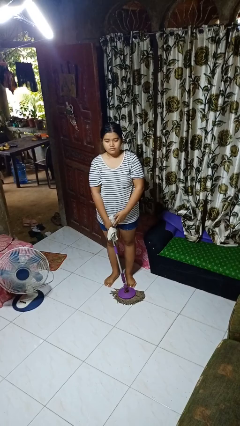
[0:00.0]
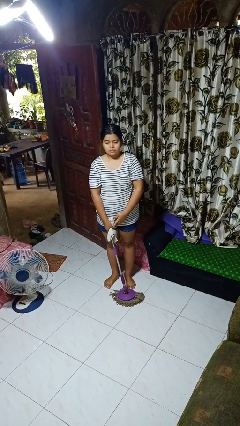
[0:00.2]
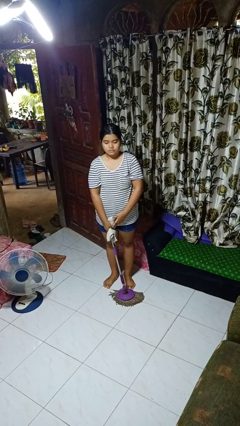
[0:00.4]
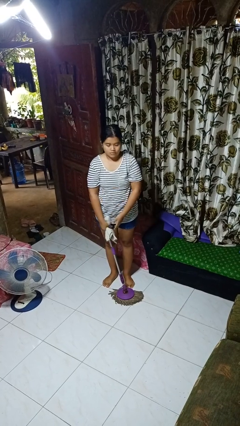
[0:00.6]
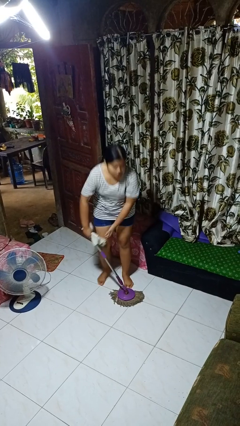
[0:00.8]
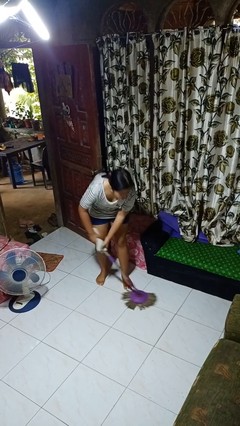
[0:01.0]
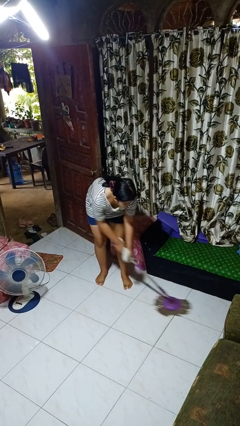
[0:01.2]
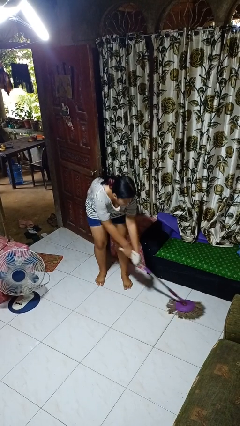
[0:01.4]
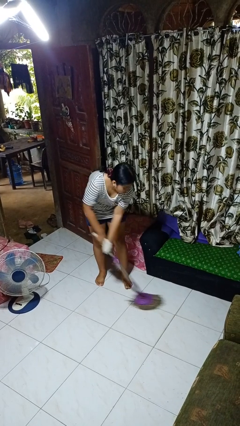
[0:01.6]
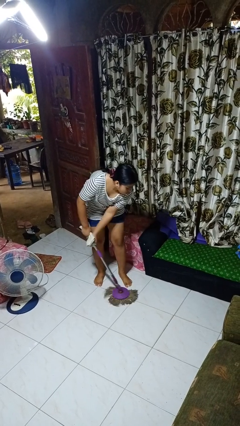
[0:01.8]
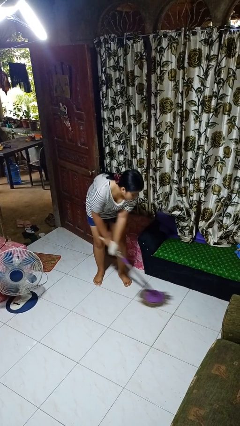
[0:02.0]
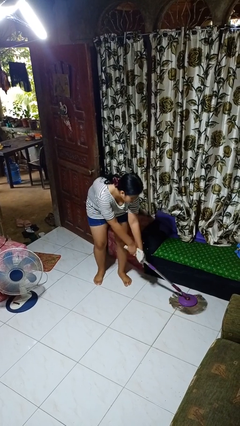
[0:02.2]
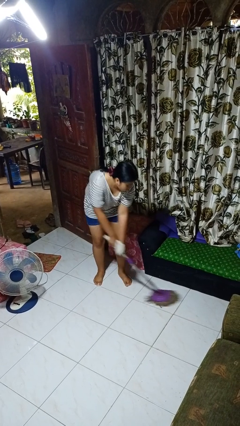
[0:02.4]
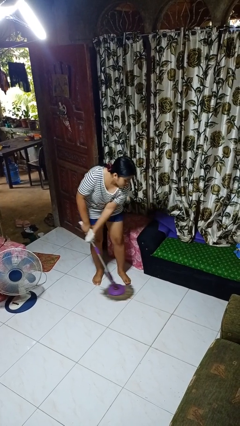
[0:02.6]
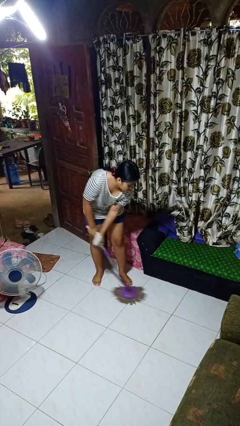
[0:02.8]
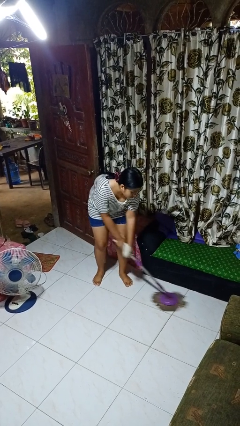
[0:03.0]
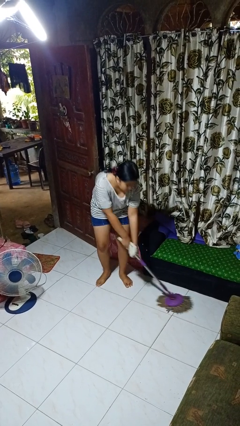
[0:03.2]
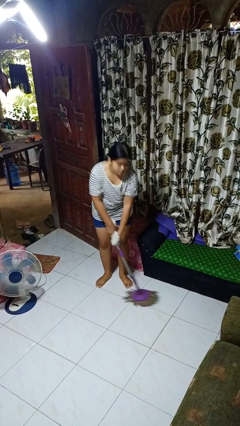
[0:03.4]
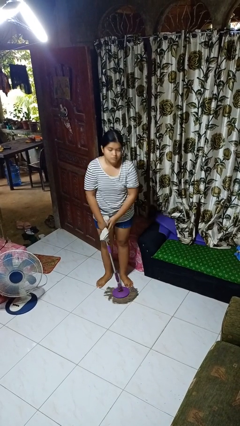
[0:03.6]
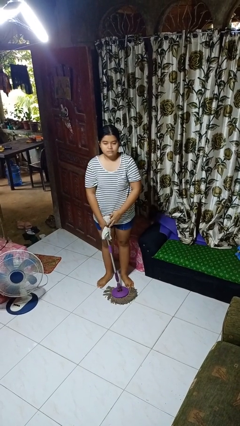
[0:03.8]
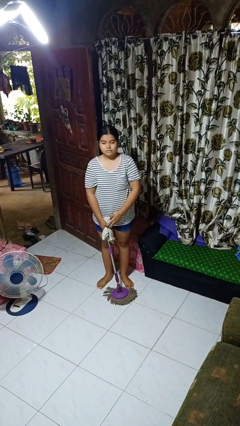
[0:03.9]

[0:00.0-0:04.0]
person mops

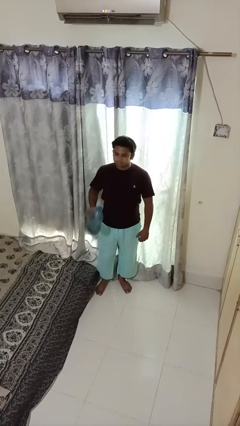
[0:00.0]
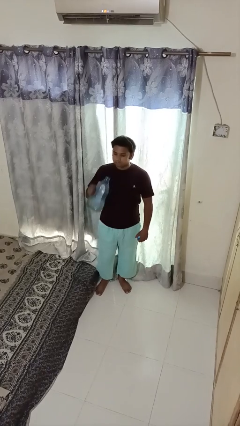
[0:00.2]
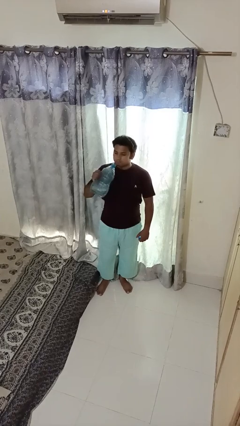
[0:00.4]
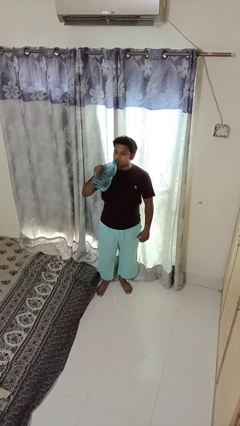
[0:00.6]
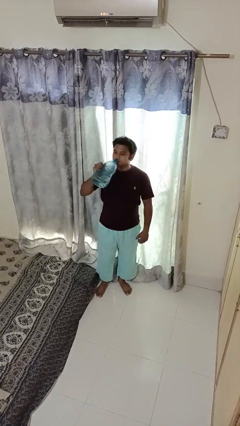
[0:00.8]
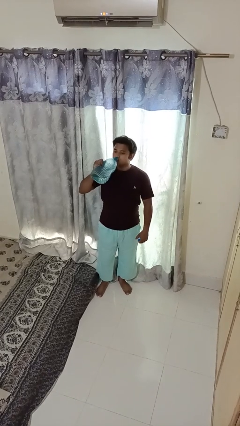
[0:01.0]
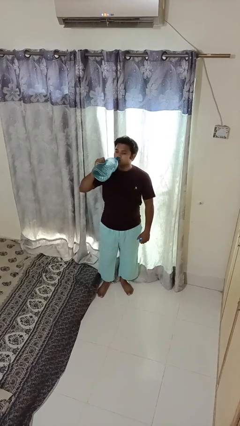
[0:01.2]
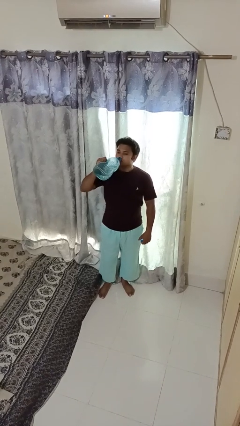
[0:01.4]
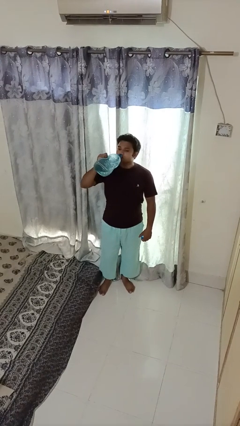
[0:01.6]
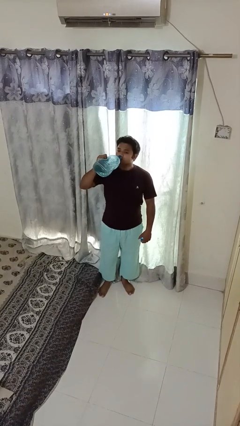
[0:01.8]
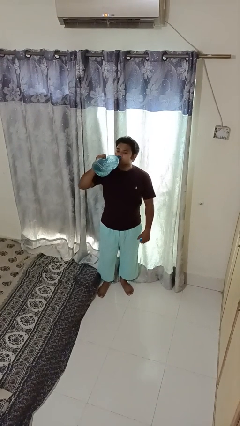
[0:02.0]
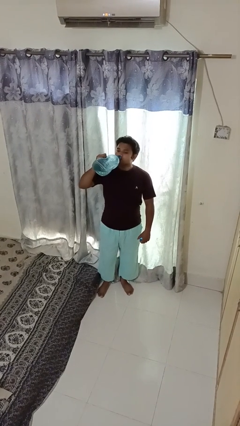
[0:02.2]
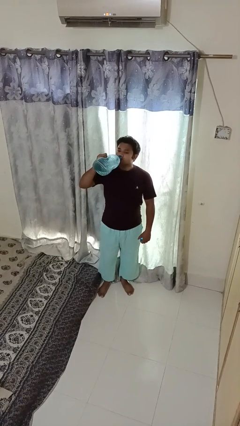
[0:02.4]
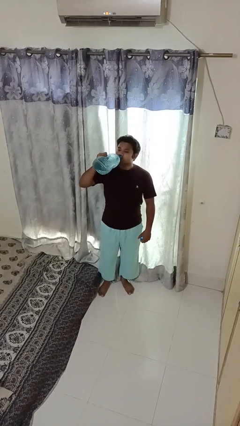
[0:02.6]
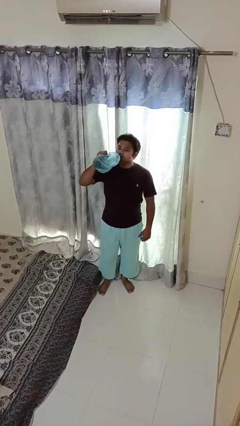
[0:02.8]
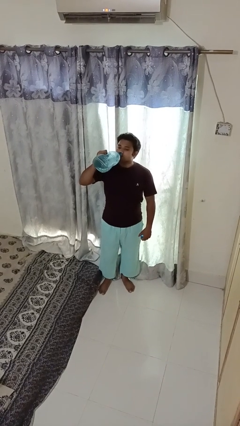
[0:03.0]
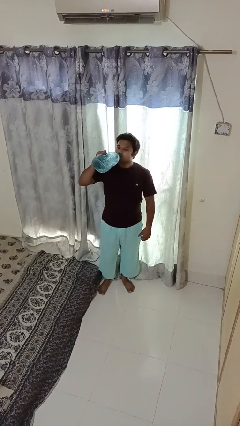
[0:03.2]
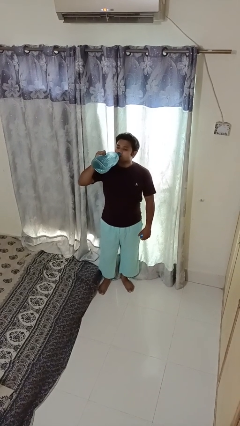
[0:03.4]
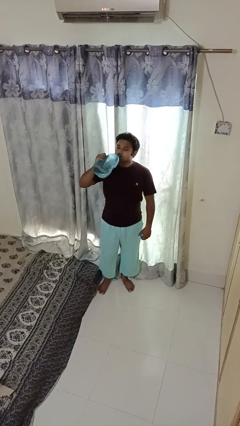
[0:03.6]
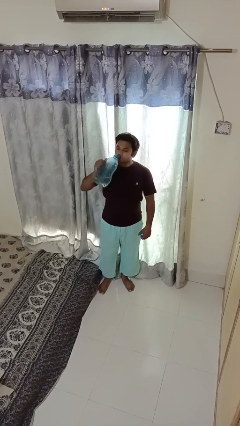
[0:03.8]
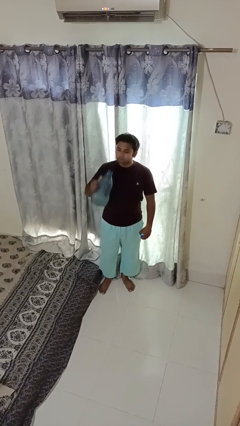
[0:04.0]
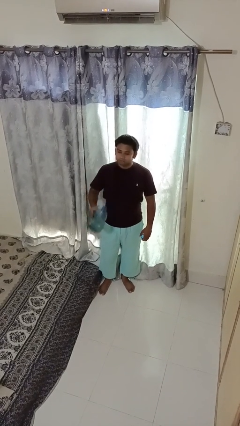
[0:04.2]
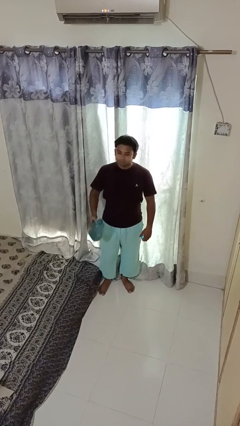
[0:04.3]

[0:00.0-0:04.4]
person drinks from bottle

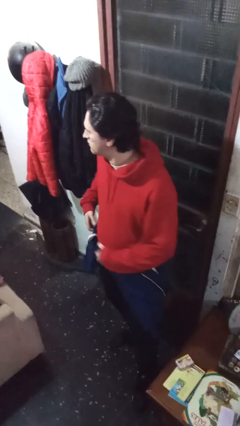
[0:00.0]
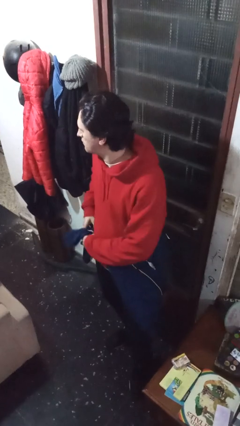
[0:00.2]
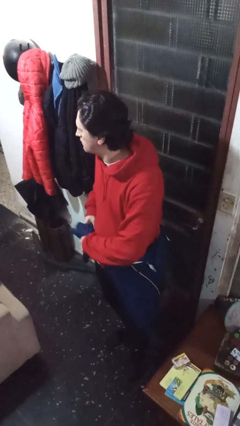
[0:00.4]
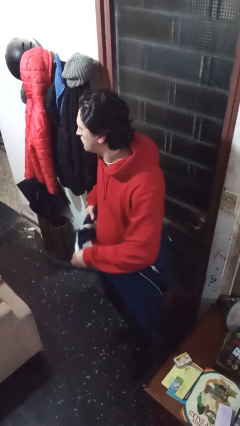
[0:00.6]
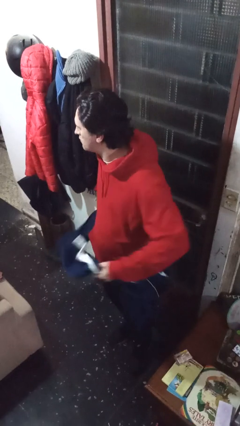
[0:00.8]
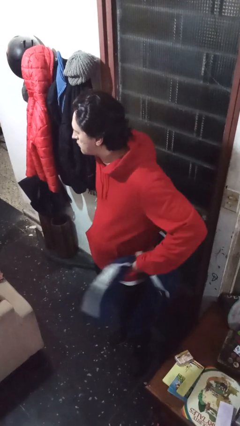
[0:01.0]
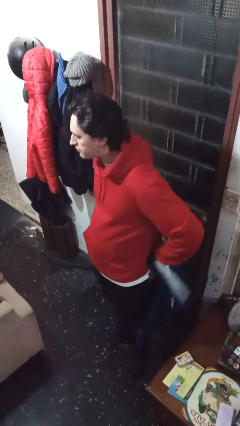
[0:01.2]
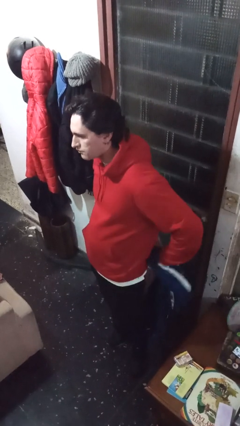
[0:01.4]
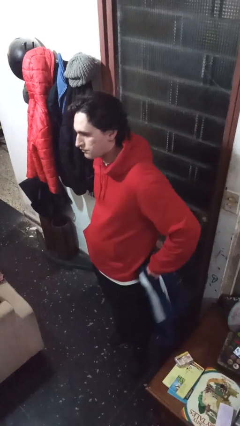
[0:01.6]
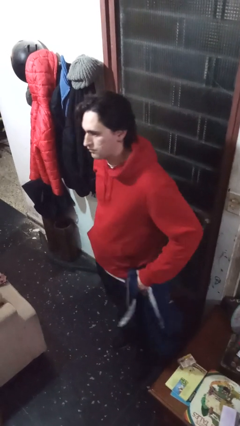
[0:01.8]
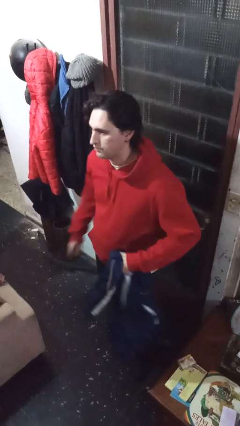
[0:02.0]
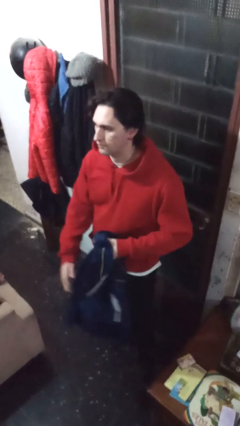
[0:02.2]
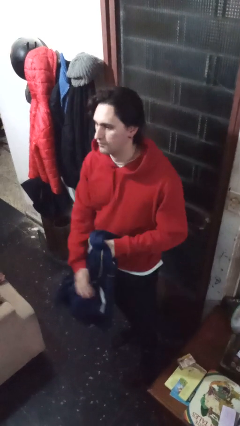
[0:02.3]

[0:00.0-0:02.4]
person unties jacket around waist
